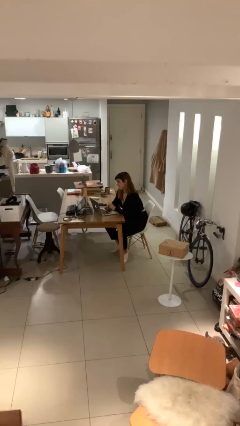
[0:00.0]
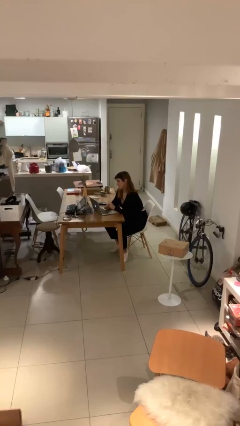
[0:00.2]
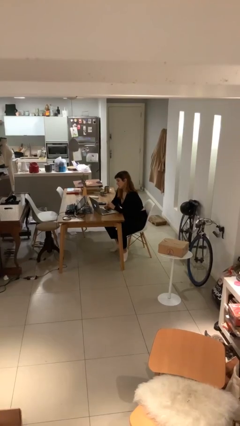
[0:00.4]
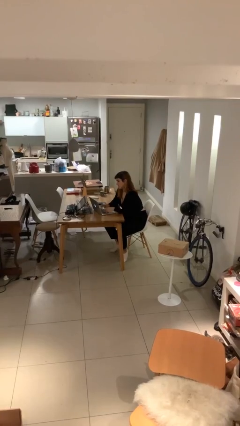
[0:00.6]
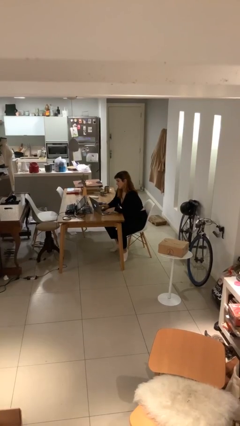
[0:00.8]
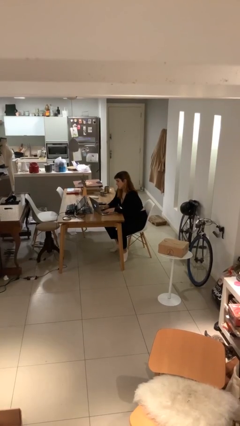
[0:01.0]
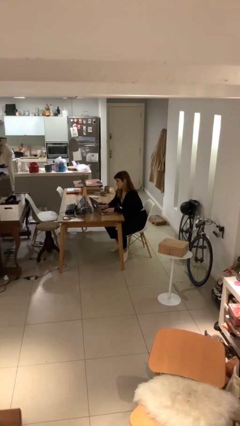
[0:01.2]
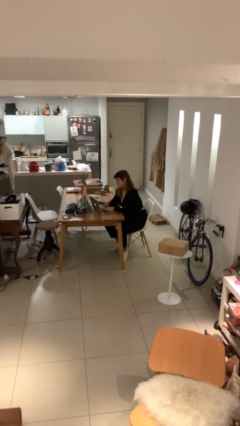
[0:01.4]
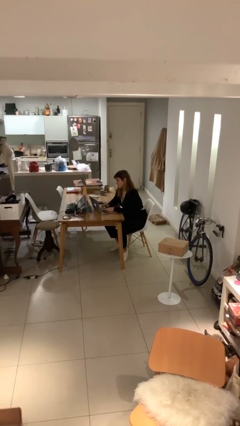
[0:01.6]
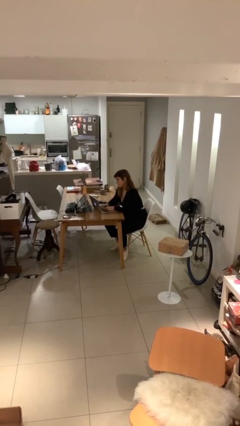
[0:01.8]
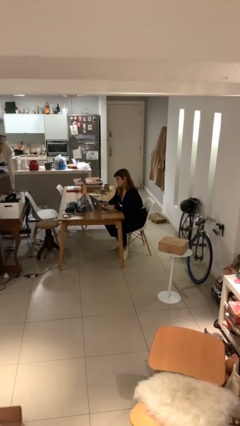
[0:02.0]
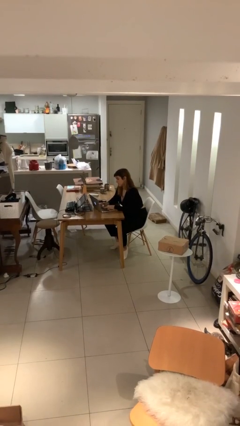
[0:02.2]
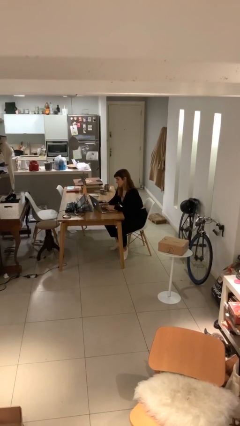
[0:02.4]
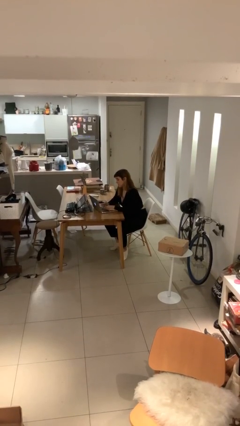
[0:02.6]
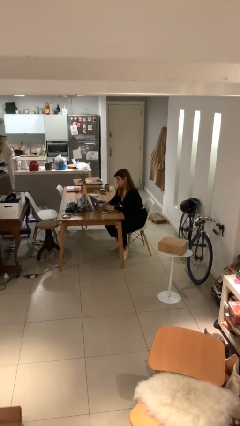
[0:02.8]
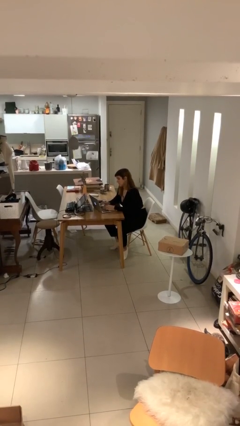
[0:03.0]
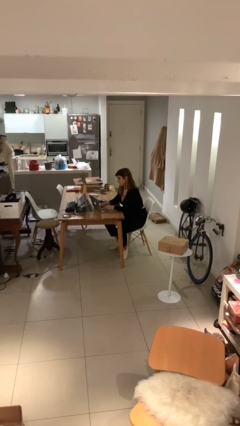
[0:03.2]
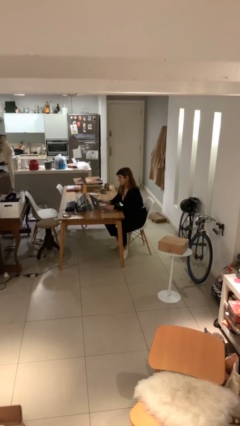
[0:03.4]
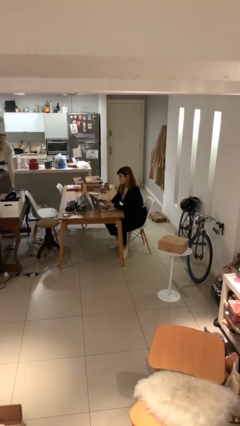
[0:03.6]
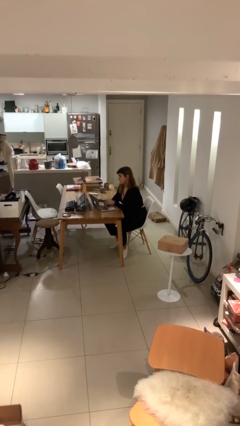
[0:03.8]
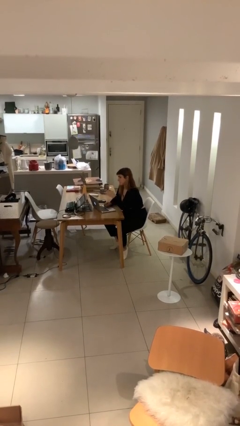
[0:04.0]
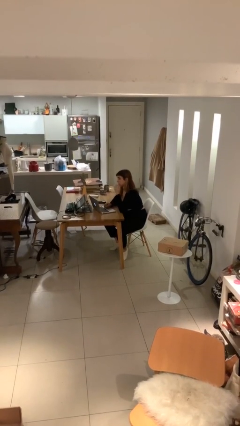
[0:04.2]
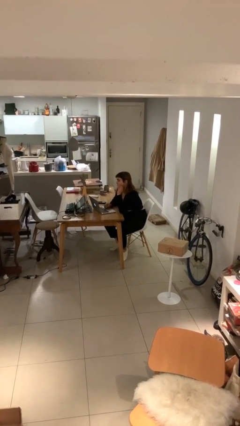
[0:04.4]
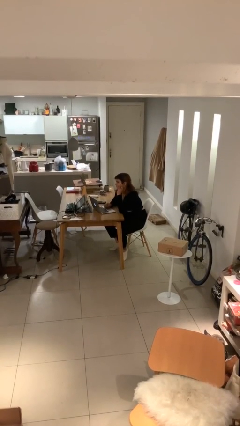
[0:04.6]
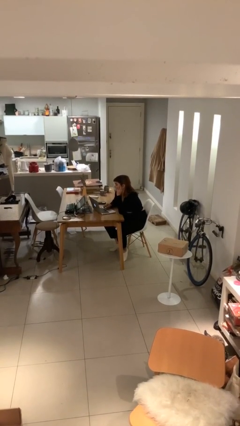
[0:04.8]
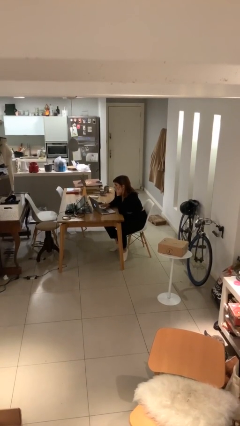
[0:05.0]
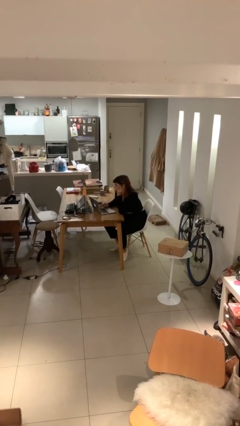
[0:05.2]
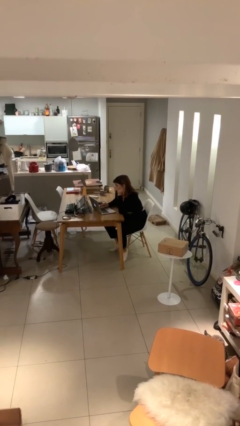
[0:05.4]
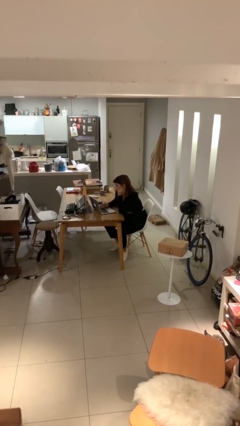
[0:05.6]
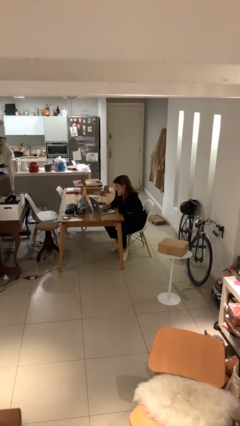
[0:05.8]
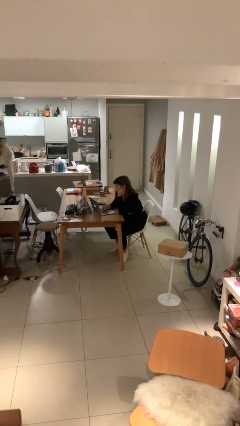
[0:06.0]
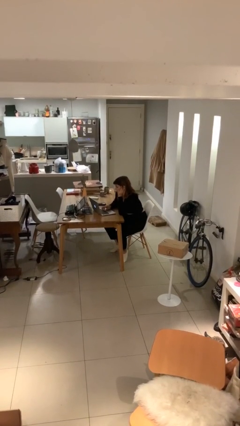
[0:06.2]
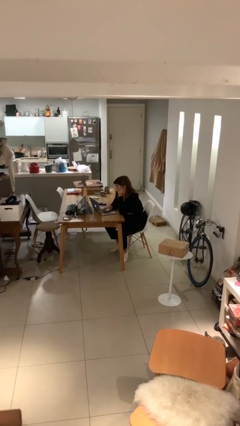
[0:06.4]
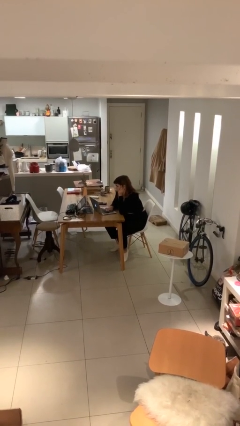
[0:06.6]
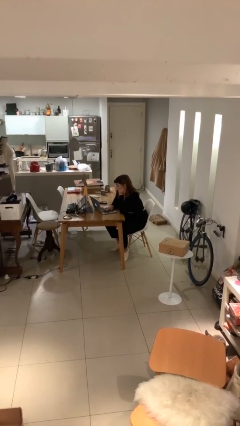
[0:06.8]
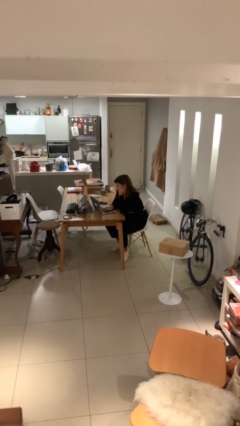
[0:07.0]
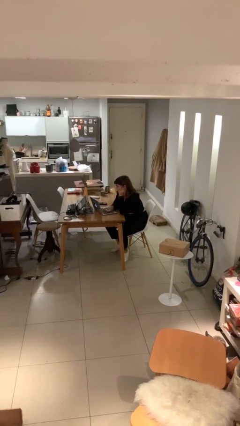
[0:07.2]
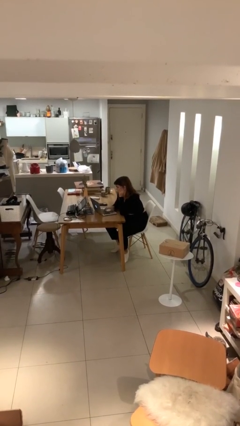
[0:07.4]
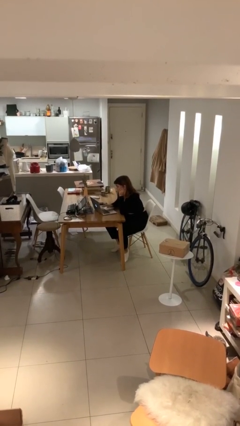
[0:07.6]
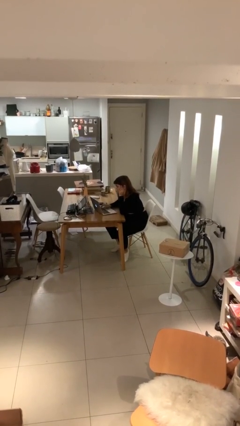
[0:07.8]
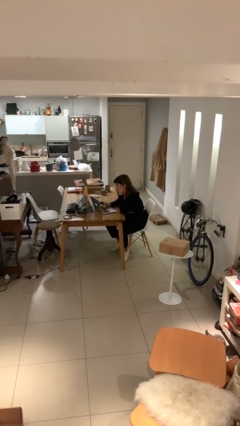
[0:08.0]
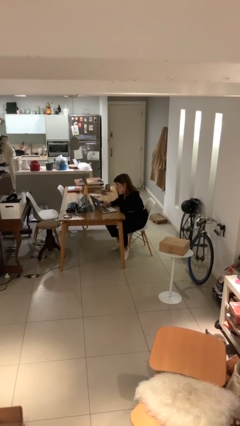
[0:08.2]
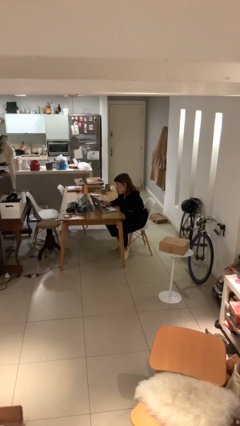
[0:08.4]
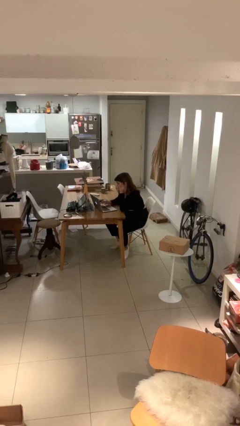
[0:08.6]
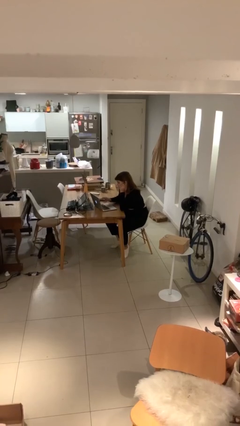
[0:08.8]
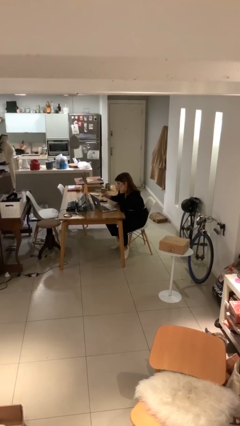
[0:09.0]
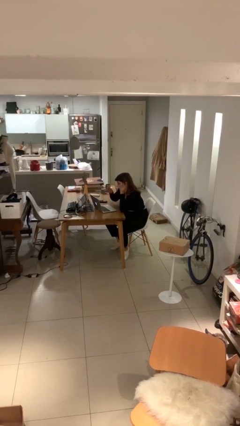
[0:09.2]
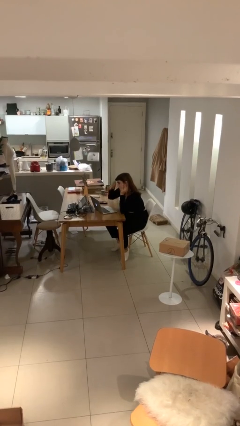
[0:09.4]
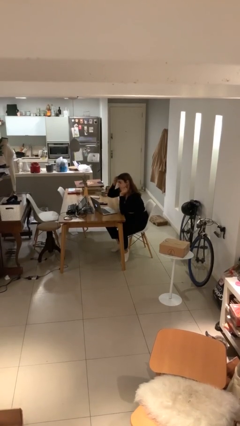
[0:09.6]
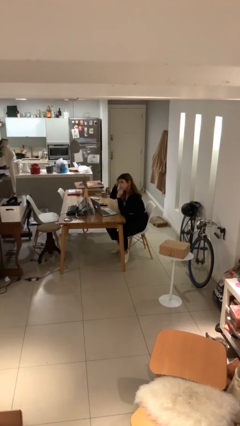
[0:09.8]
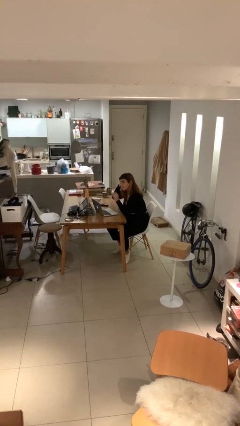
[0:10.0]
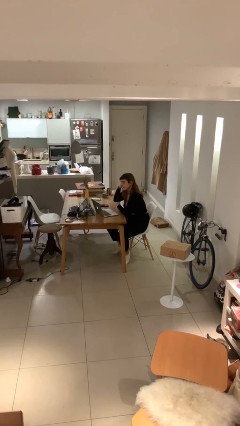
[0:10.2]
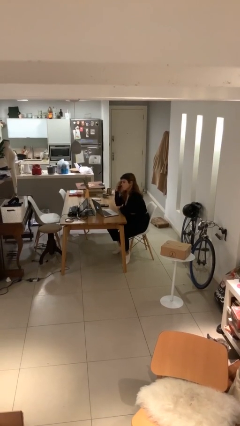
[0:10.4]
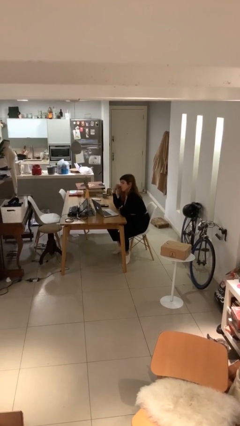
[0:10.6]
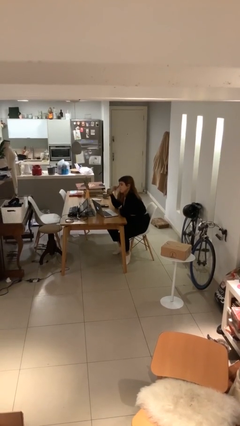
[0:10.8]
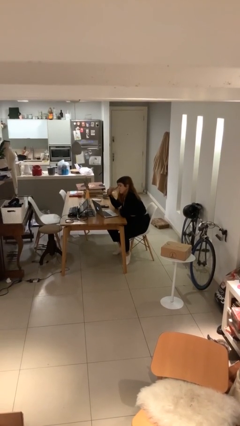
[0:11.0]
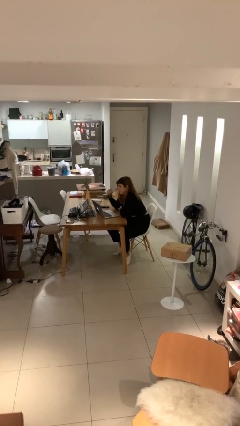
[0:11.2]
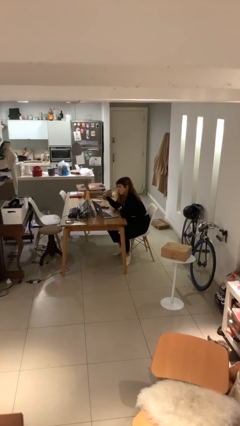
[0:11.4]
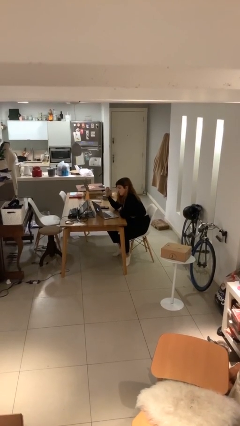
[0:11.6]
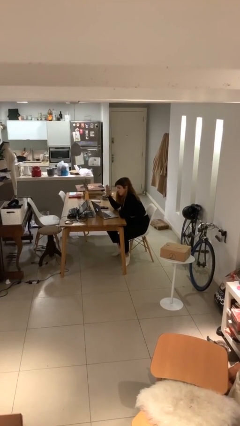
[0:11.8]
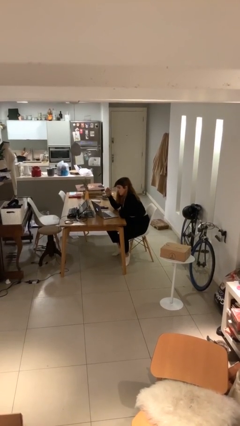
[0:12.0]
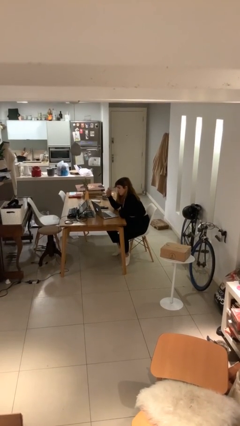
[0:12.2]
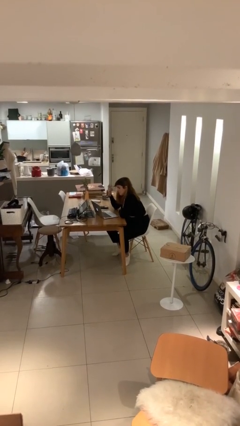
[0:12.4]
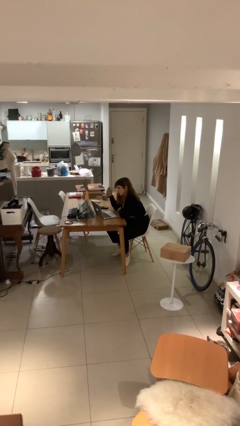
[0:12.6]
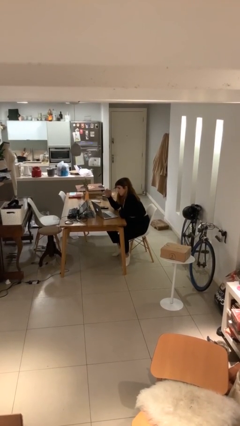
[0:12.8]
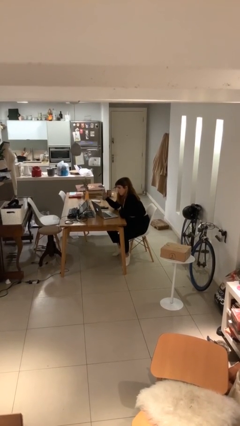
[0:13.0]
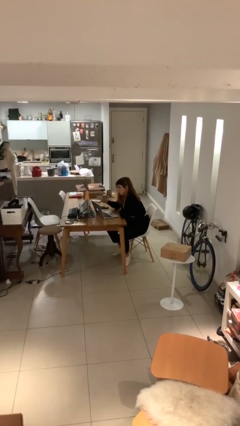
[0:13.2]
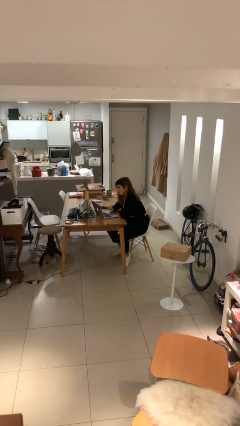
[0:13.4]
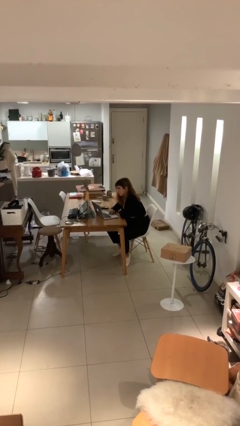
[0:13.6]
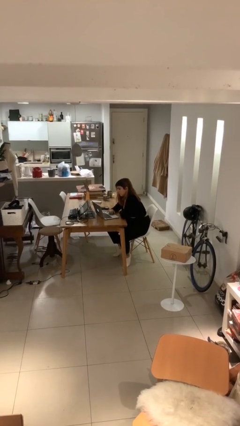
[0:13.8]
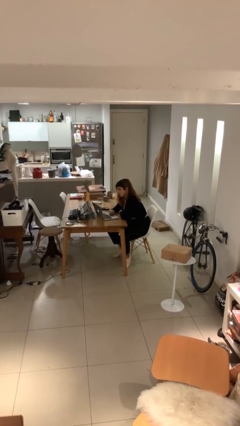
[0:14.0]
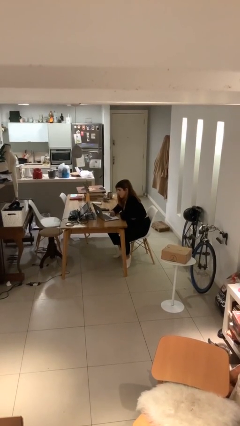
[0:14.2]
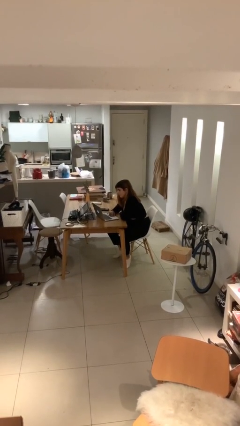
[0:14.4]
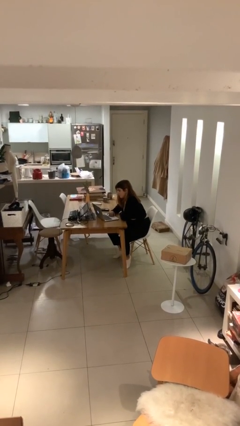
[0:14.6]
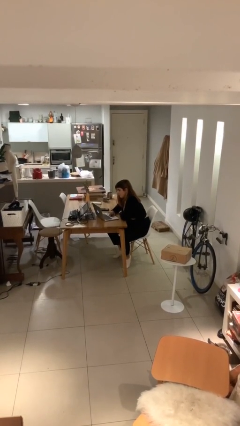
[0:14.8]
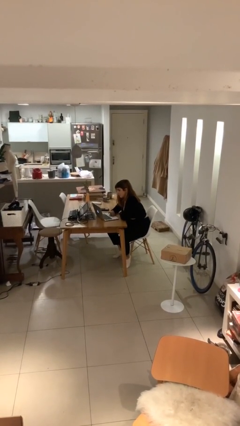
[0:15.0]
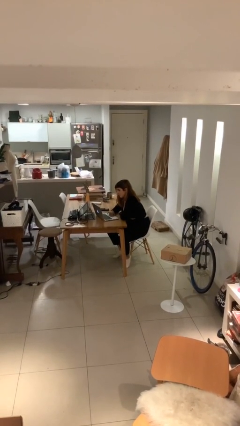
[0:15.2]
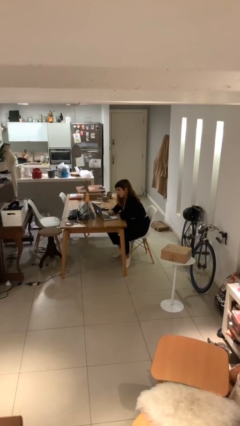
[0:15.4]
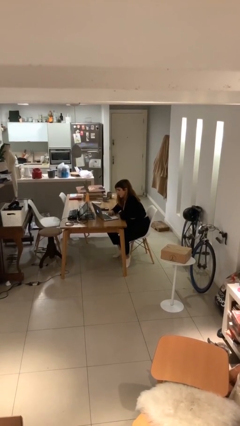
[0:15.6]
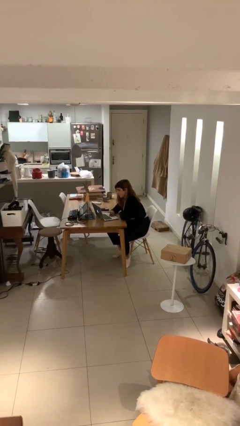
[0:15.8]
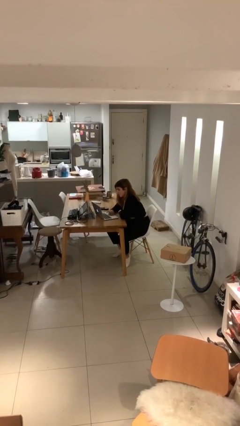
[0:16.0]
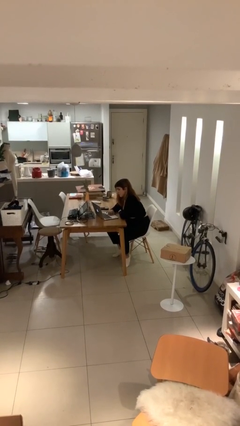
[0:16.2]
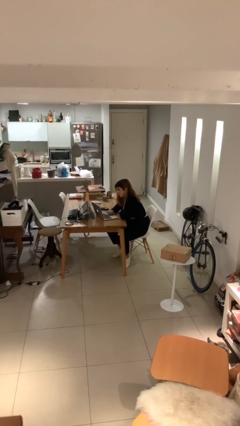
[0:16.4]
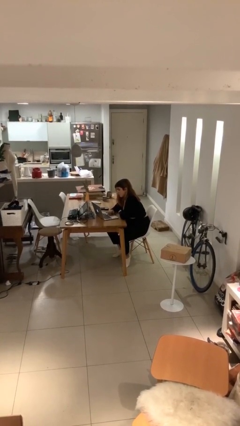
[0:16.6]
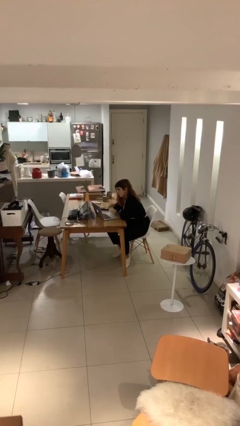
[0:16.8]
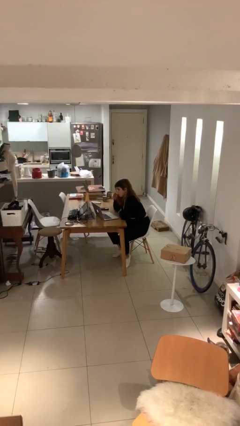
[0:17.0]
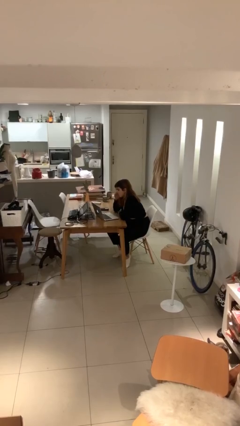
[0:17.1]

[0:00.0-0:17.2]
person interacts with laptop

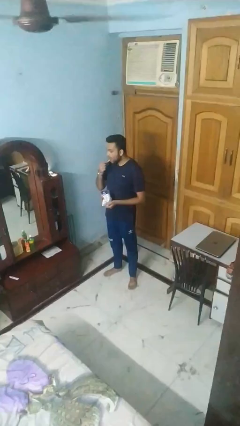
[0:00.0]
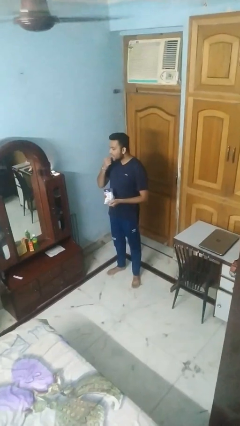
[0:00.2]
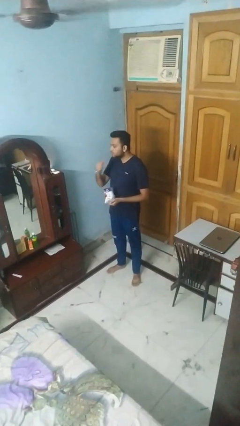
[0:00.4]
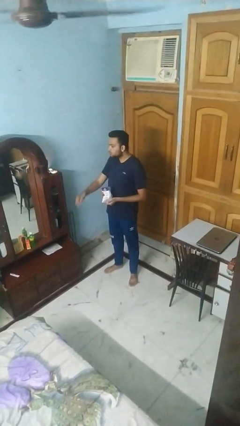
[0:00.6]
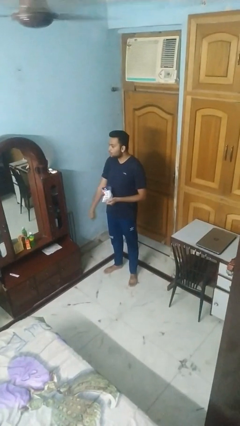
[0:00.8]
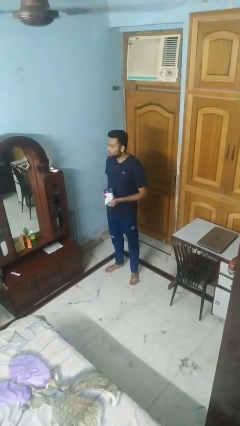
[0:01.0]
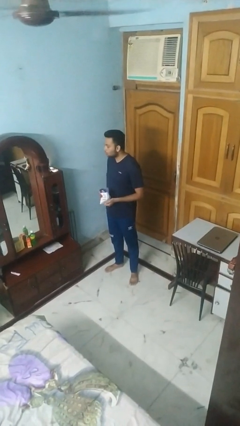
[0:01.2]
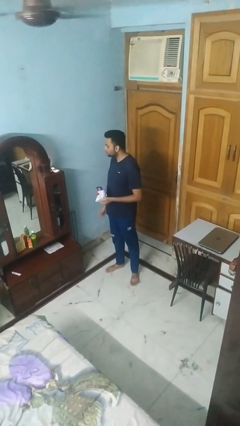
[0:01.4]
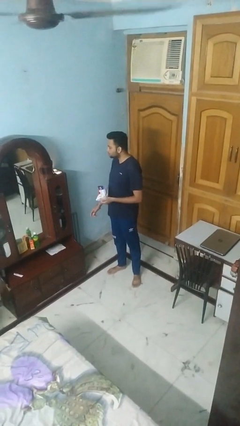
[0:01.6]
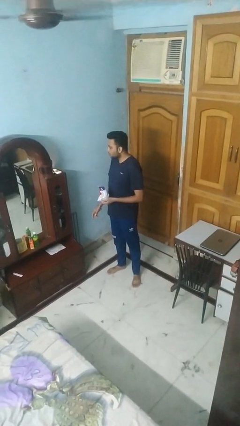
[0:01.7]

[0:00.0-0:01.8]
person eats snack from bag
